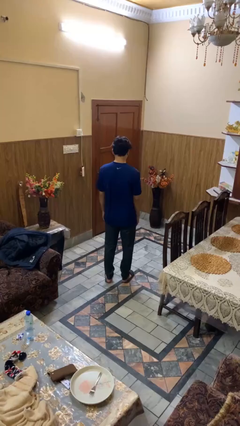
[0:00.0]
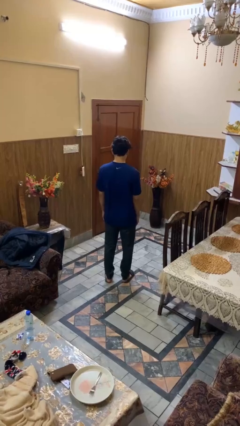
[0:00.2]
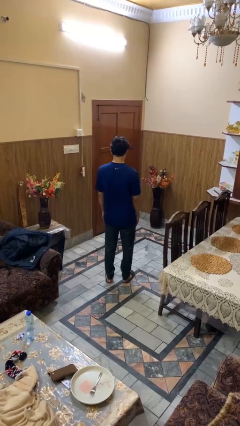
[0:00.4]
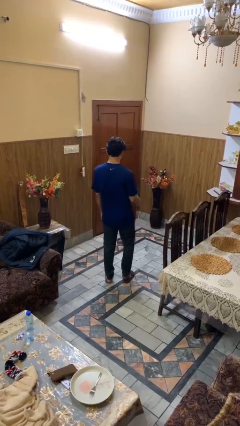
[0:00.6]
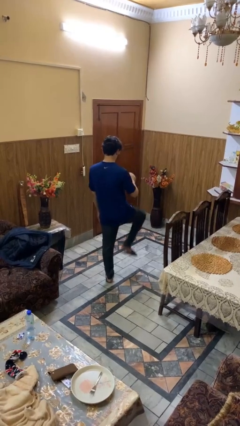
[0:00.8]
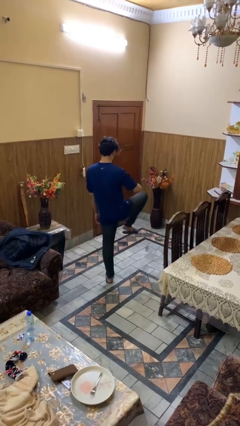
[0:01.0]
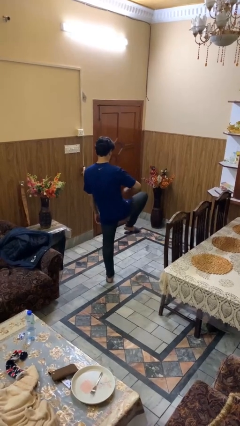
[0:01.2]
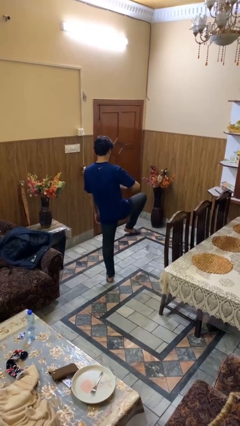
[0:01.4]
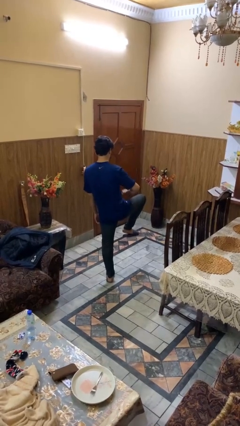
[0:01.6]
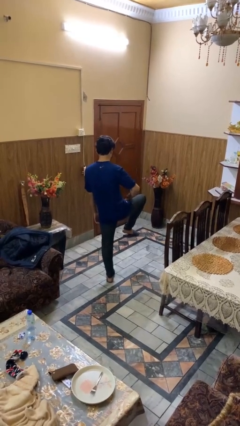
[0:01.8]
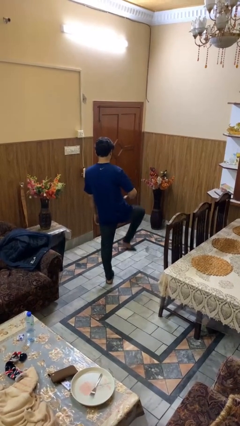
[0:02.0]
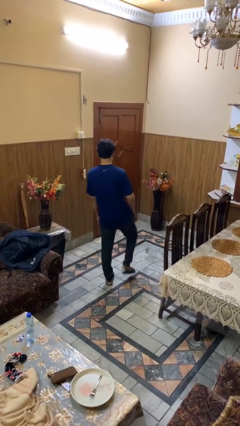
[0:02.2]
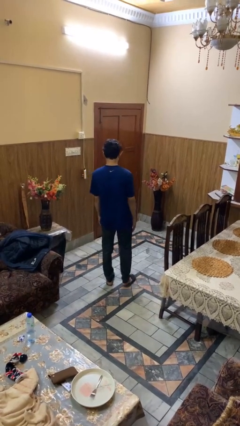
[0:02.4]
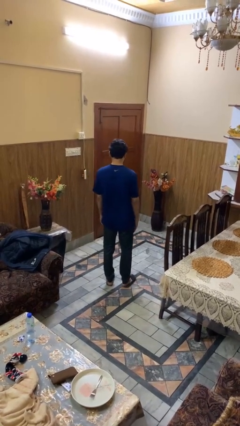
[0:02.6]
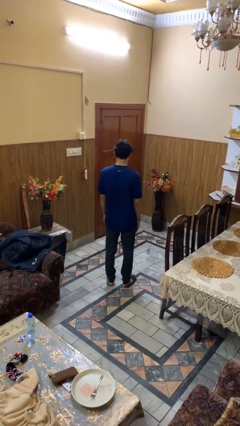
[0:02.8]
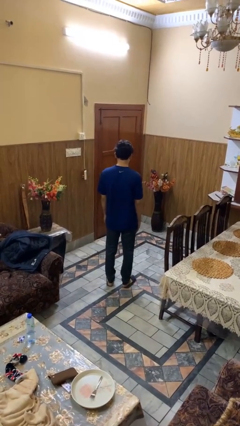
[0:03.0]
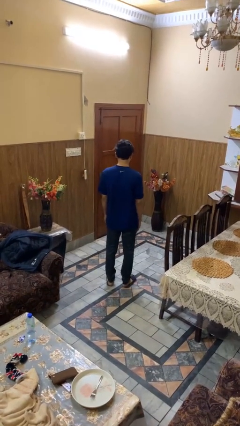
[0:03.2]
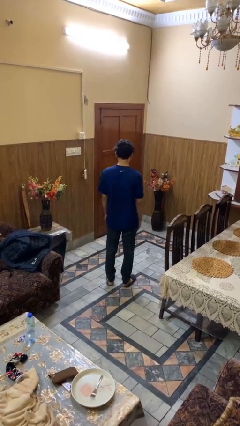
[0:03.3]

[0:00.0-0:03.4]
person slaps hands on thighs

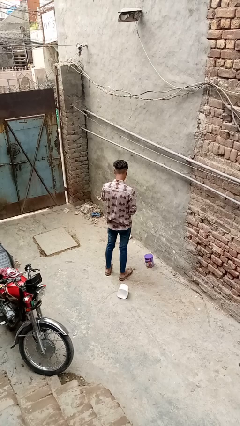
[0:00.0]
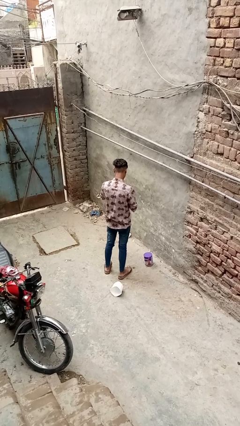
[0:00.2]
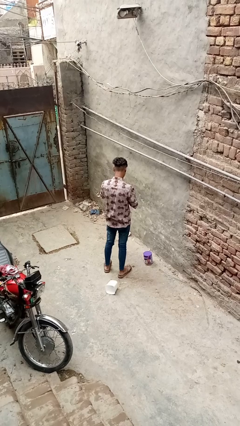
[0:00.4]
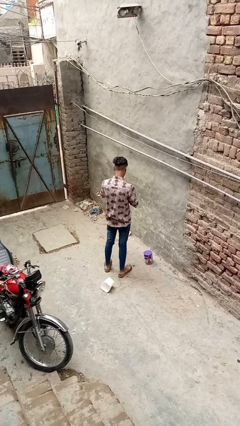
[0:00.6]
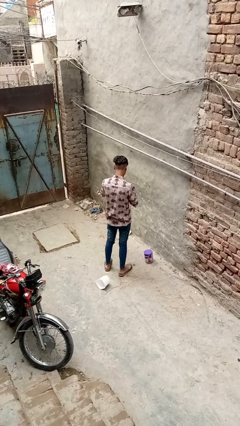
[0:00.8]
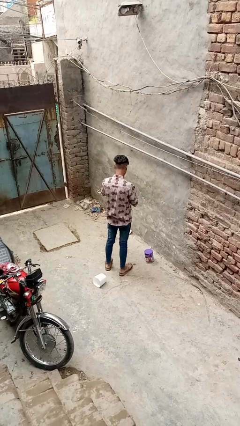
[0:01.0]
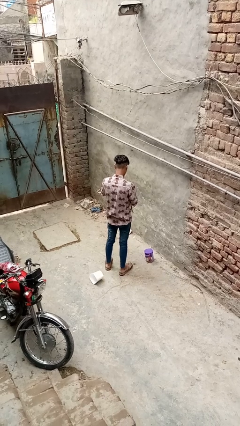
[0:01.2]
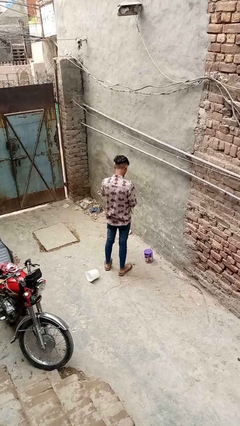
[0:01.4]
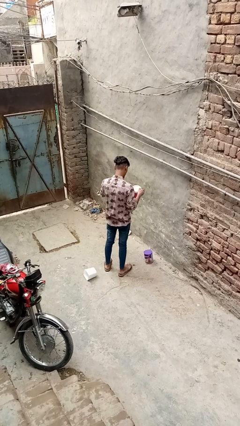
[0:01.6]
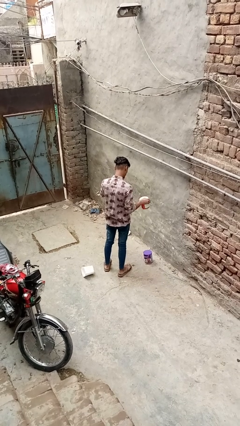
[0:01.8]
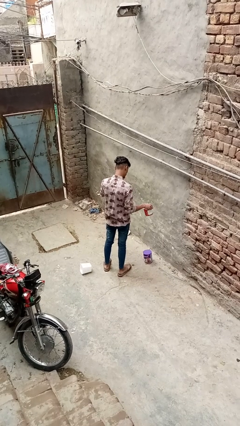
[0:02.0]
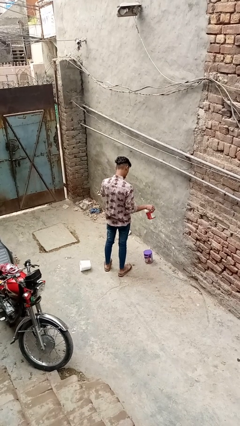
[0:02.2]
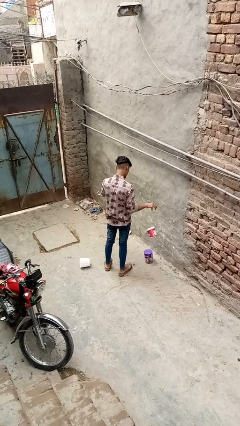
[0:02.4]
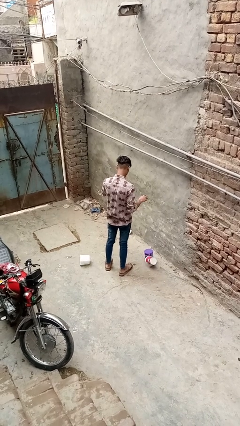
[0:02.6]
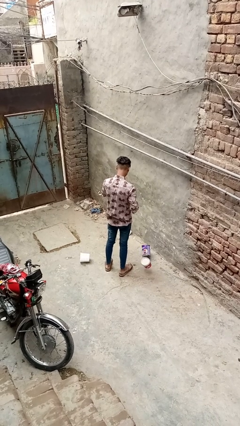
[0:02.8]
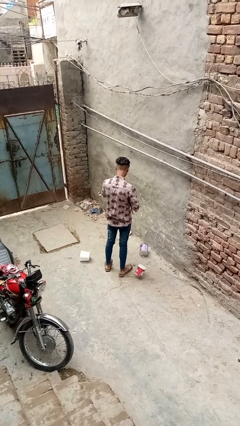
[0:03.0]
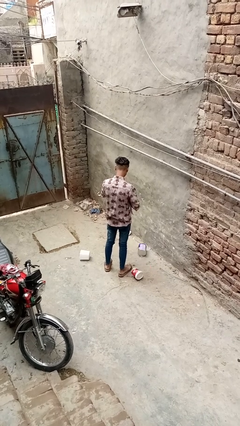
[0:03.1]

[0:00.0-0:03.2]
person discards trash

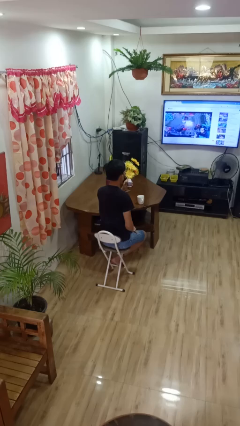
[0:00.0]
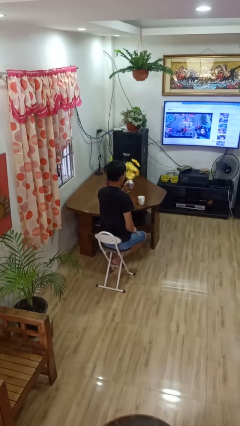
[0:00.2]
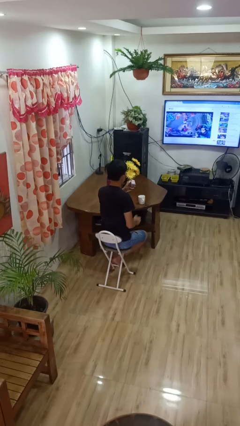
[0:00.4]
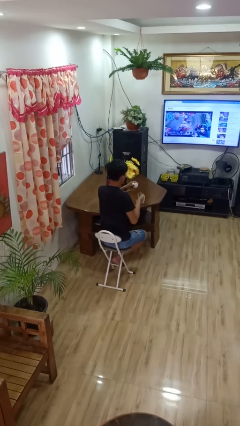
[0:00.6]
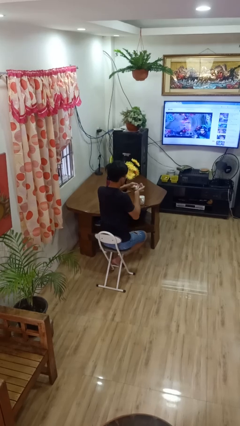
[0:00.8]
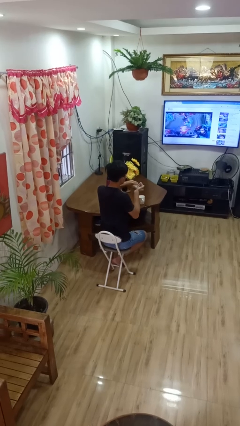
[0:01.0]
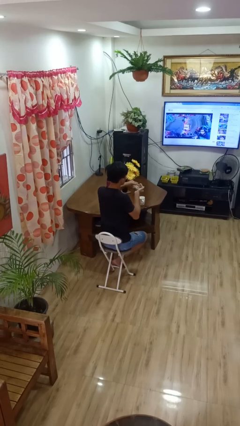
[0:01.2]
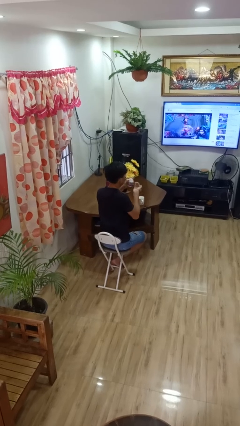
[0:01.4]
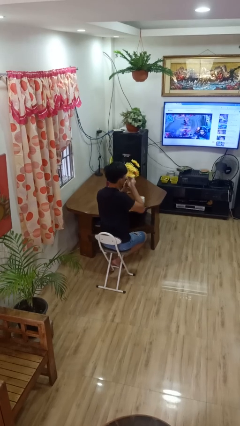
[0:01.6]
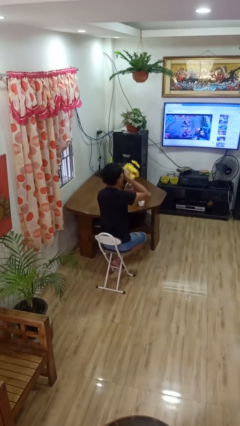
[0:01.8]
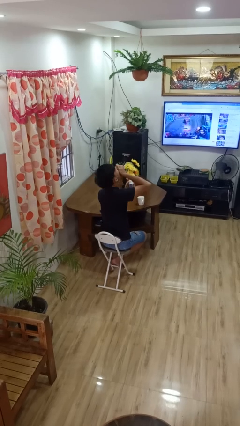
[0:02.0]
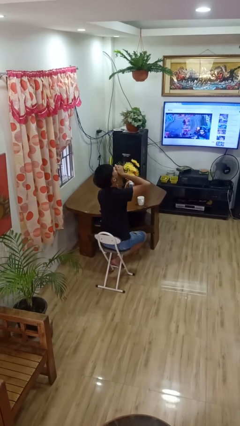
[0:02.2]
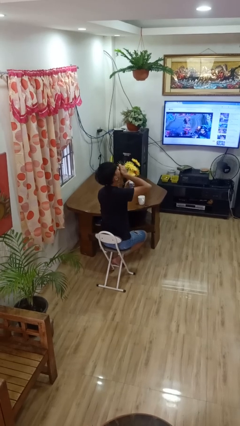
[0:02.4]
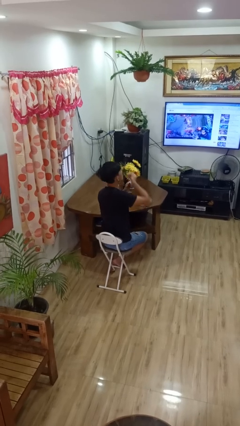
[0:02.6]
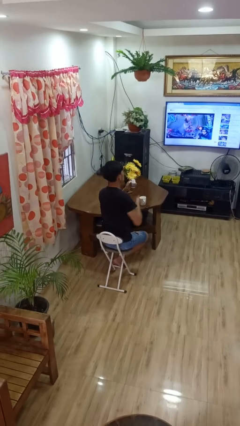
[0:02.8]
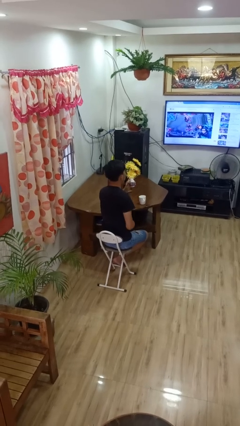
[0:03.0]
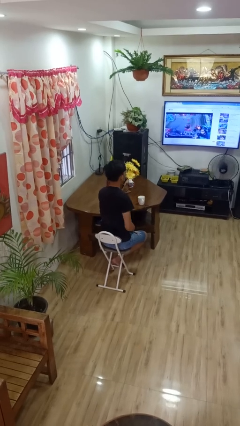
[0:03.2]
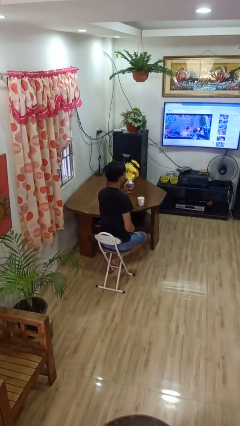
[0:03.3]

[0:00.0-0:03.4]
person takes medicine pills

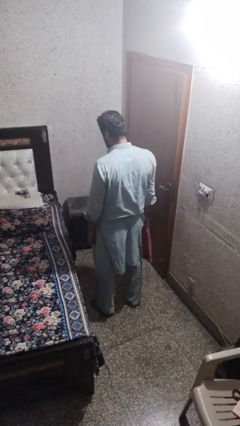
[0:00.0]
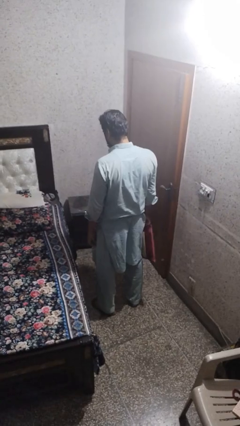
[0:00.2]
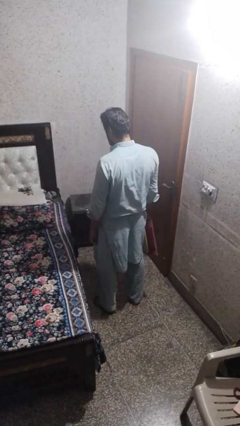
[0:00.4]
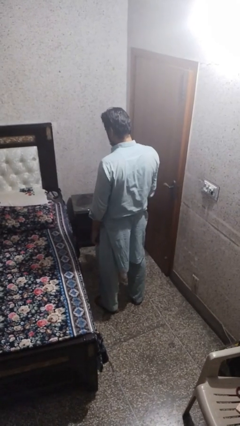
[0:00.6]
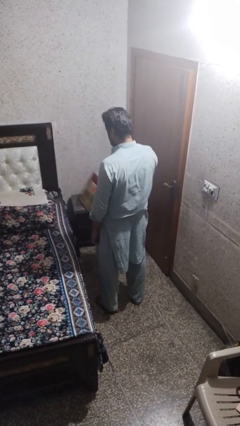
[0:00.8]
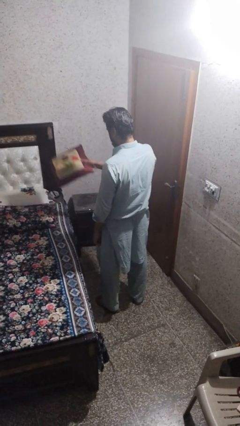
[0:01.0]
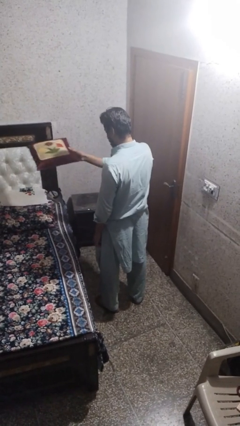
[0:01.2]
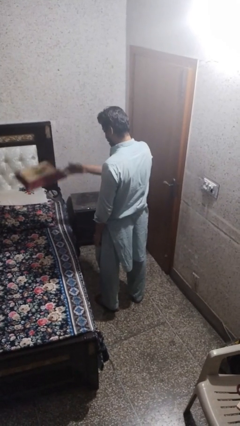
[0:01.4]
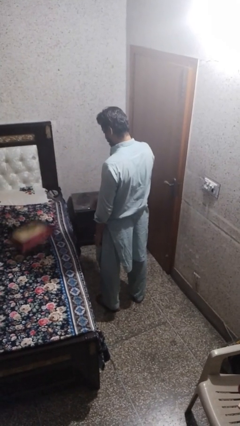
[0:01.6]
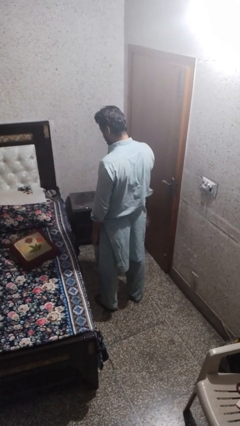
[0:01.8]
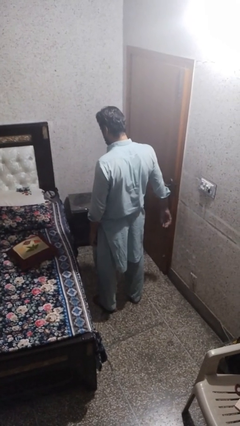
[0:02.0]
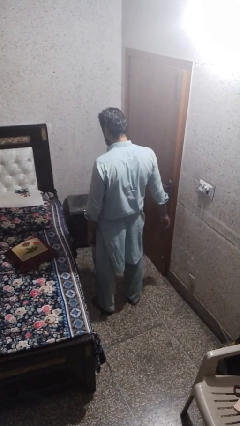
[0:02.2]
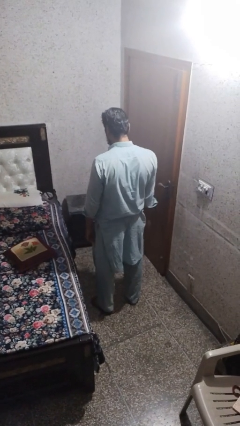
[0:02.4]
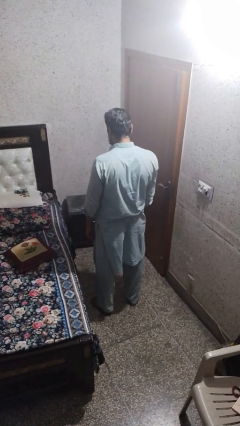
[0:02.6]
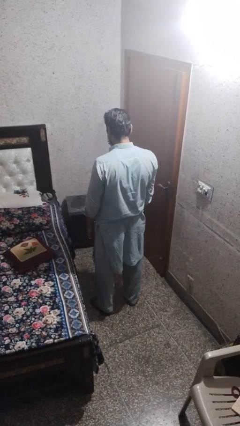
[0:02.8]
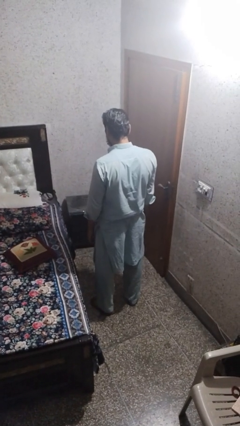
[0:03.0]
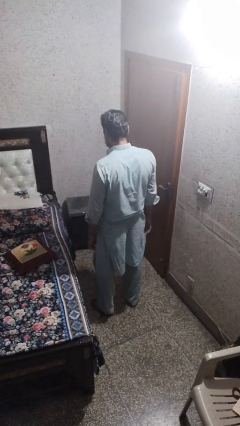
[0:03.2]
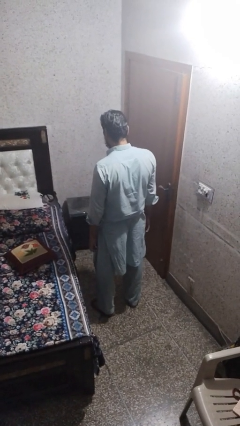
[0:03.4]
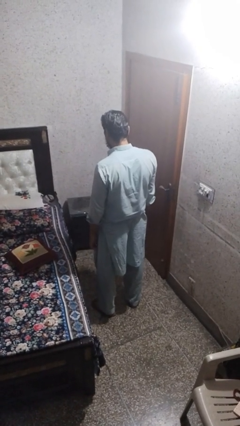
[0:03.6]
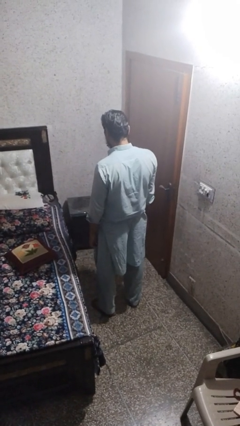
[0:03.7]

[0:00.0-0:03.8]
person throws object on bed

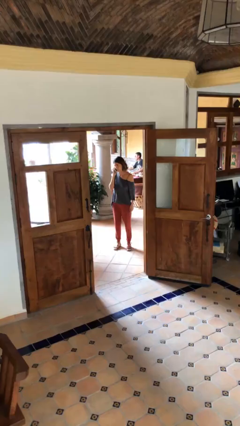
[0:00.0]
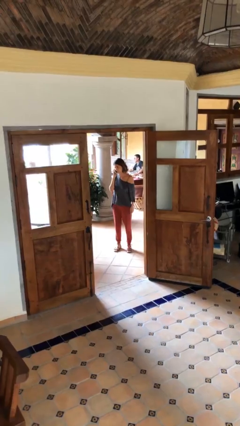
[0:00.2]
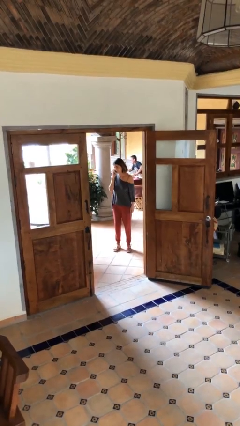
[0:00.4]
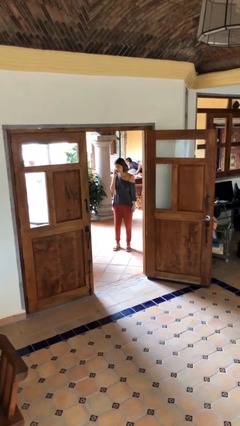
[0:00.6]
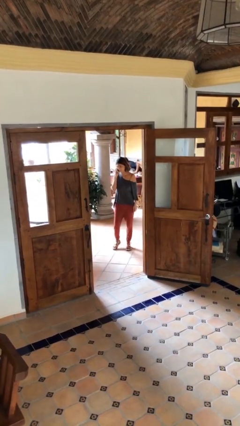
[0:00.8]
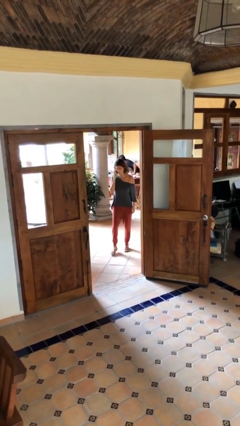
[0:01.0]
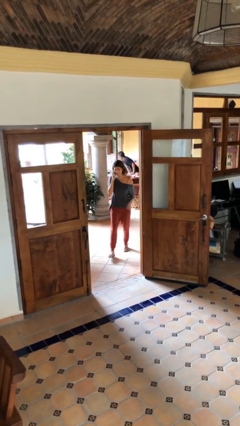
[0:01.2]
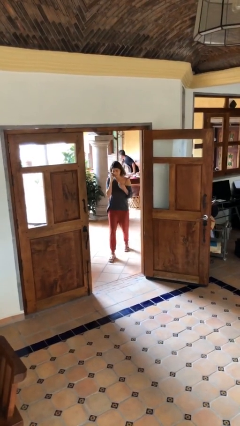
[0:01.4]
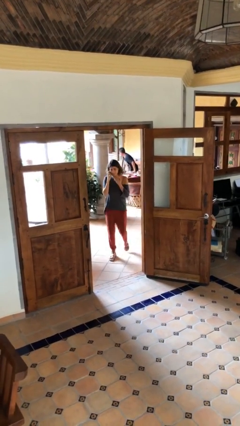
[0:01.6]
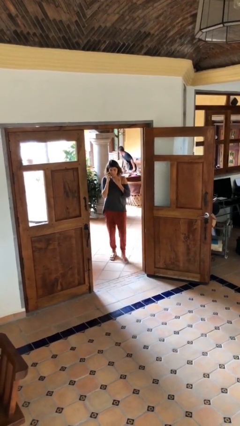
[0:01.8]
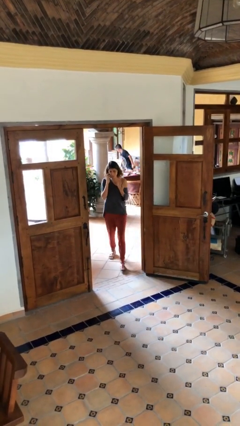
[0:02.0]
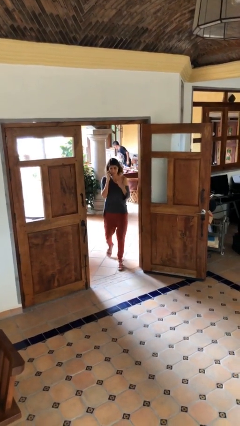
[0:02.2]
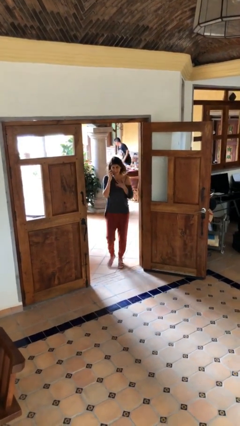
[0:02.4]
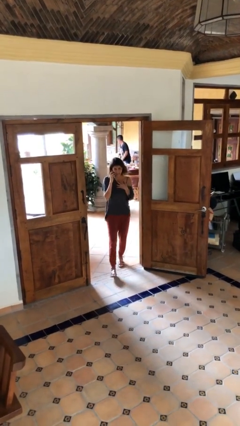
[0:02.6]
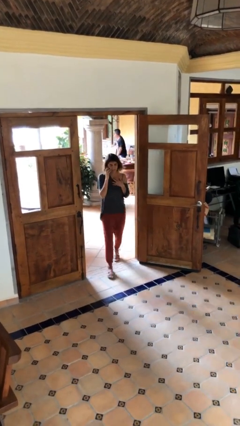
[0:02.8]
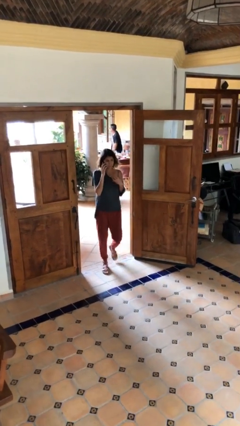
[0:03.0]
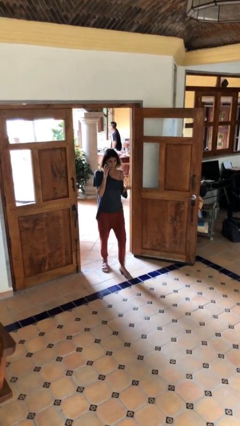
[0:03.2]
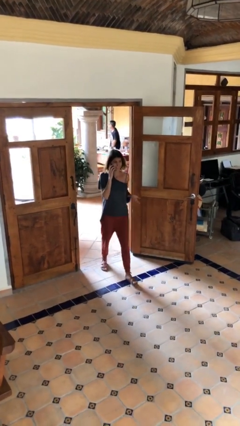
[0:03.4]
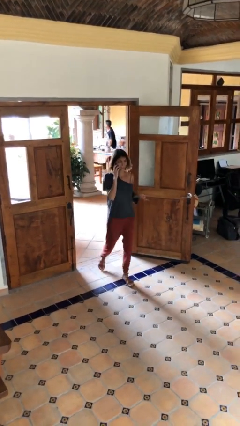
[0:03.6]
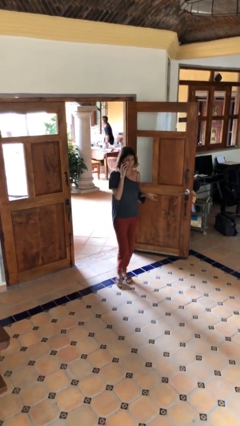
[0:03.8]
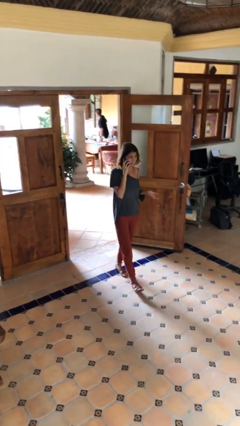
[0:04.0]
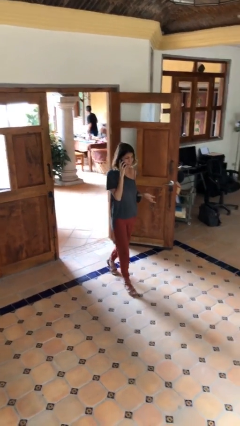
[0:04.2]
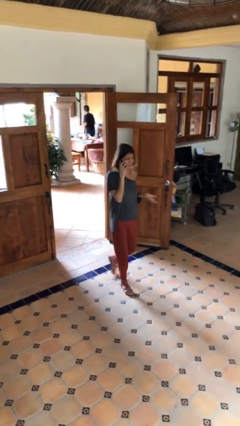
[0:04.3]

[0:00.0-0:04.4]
person enters scene through structure
